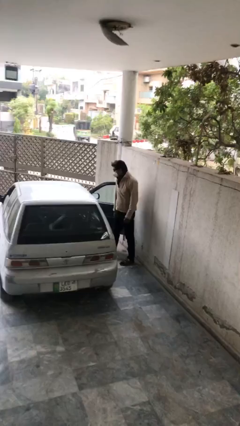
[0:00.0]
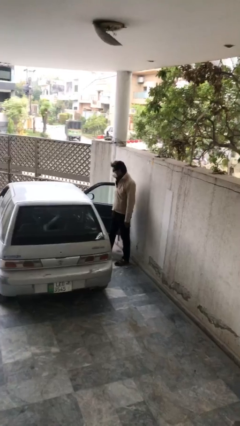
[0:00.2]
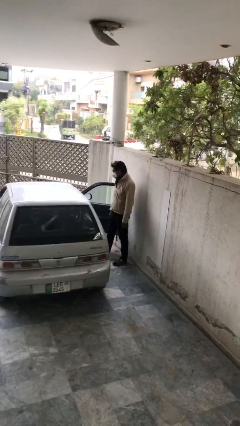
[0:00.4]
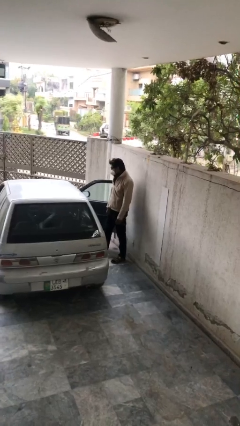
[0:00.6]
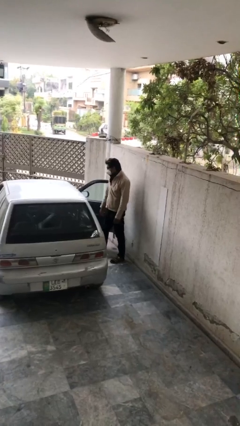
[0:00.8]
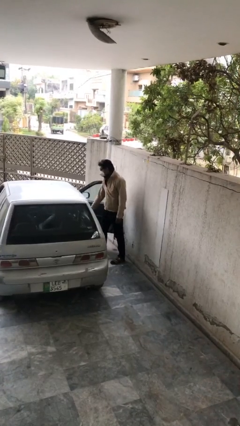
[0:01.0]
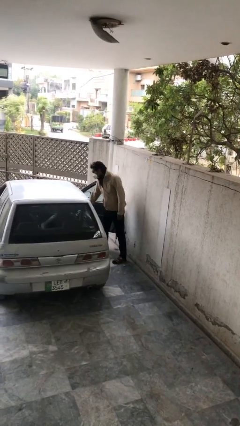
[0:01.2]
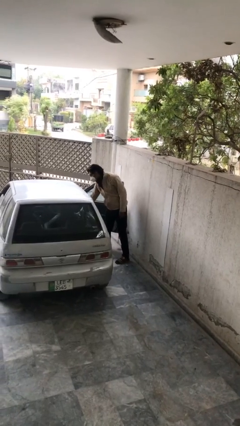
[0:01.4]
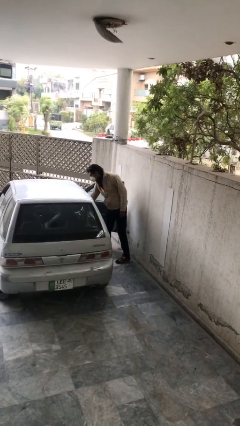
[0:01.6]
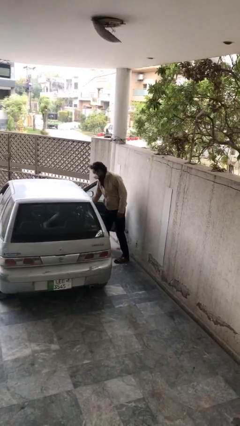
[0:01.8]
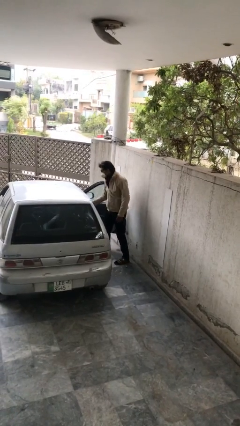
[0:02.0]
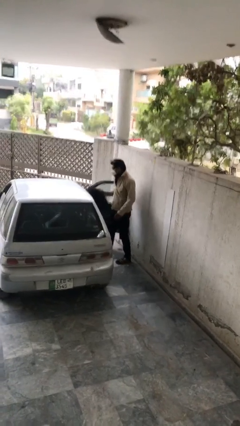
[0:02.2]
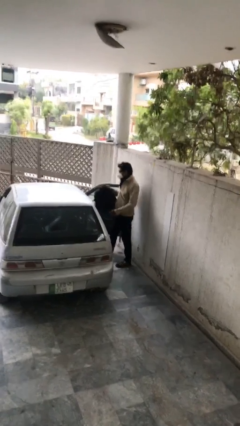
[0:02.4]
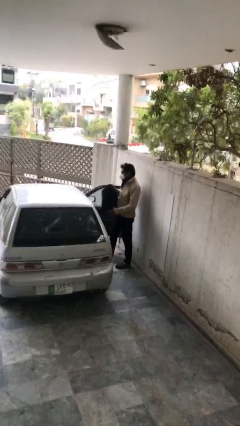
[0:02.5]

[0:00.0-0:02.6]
person unloads car

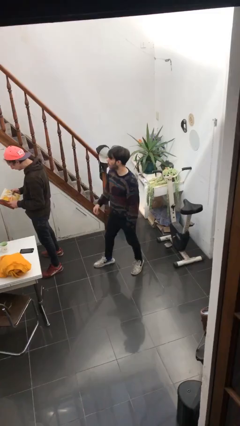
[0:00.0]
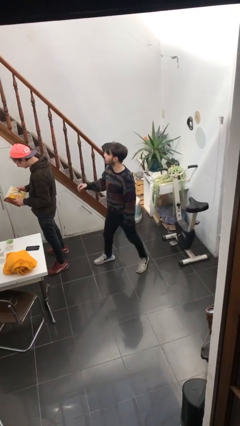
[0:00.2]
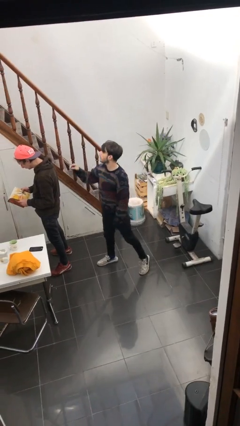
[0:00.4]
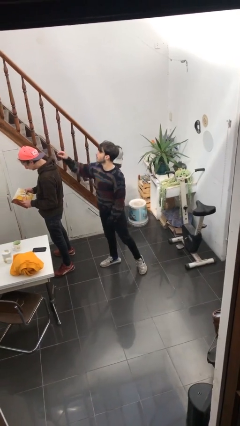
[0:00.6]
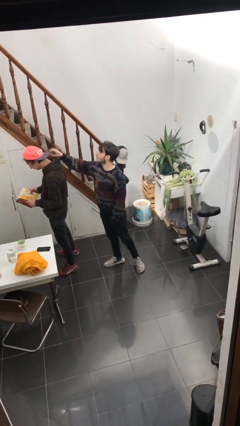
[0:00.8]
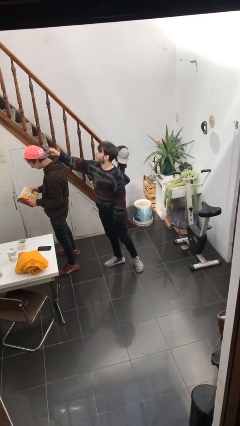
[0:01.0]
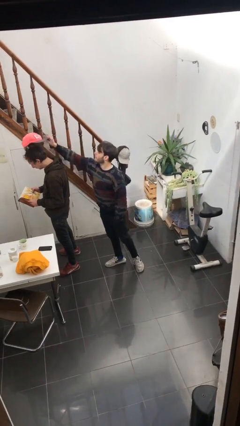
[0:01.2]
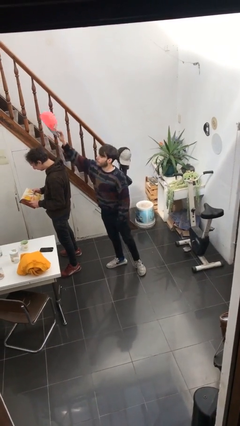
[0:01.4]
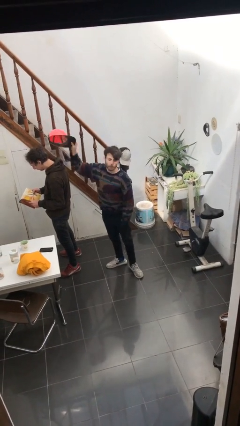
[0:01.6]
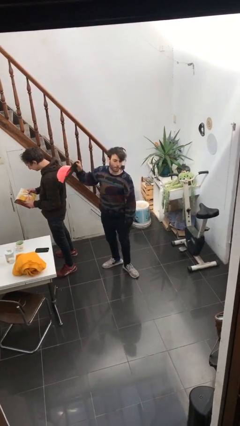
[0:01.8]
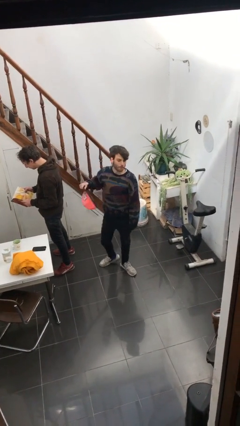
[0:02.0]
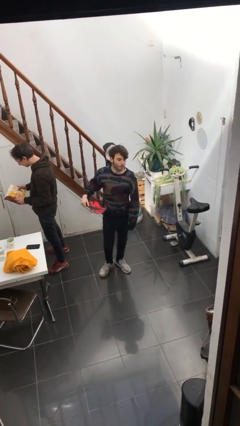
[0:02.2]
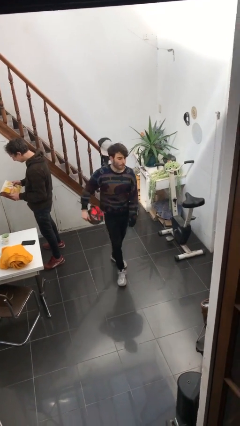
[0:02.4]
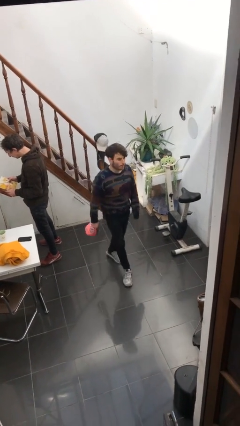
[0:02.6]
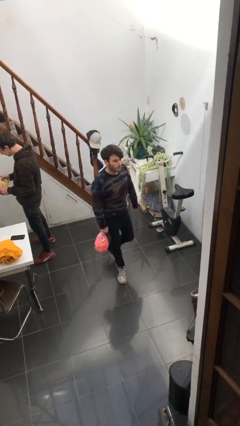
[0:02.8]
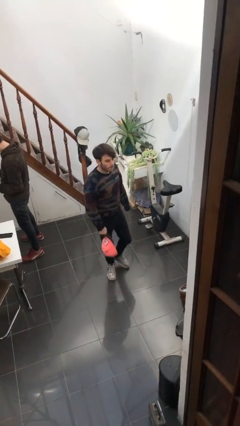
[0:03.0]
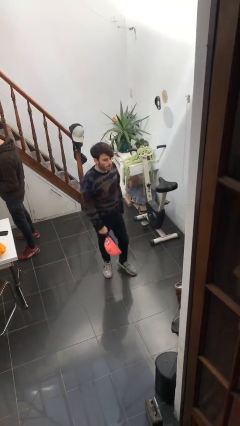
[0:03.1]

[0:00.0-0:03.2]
person steals object from person

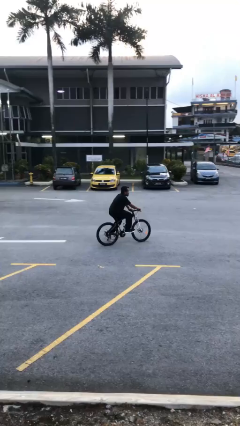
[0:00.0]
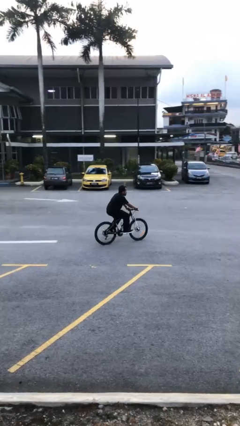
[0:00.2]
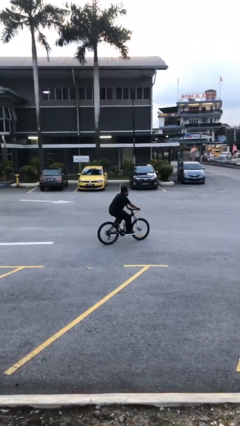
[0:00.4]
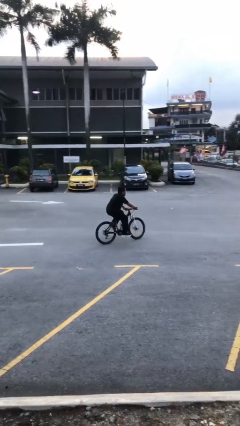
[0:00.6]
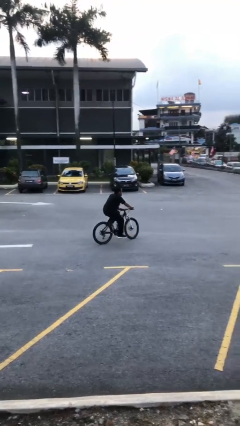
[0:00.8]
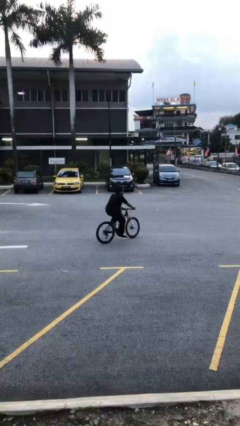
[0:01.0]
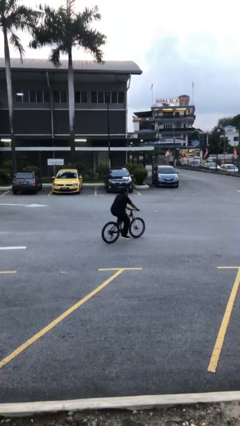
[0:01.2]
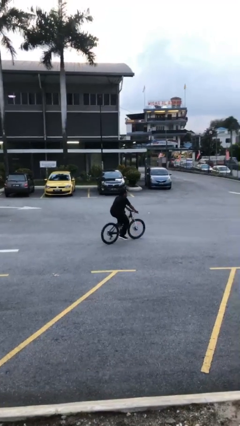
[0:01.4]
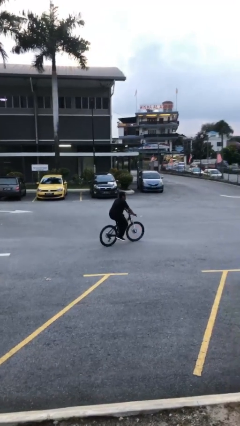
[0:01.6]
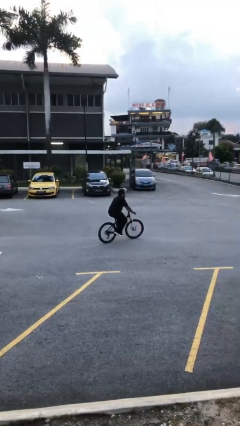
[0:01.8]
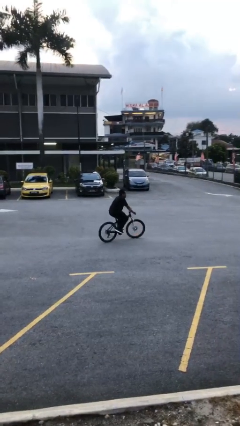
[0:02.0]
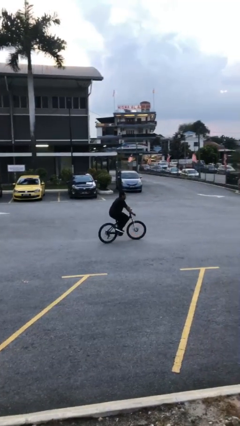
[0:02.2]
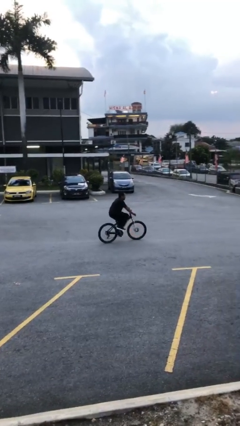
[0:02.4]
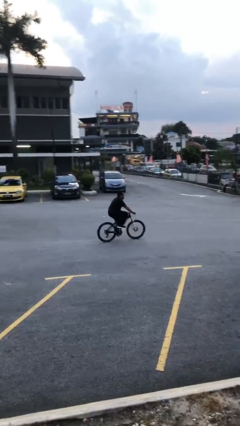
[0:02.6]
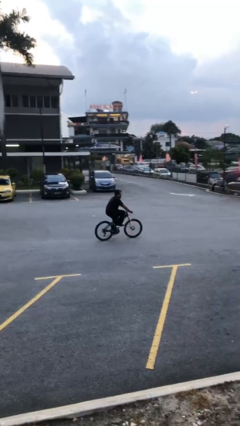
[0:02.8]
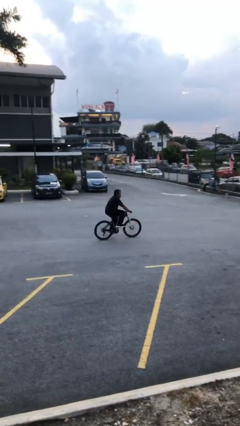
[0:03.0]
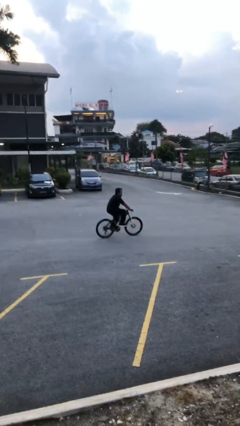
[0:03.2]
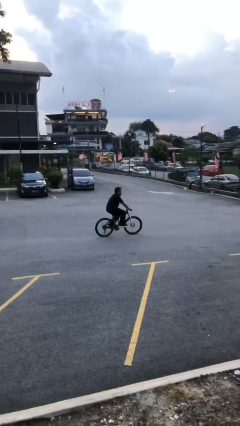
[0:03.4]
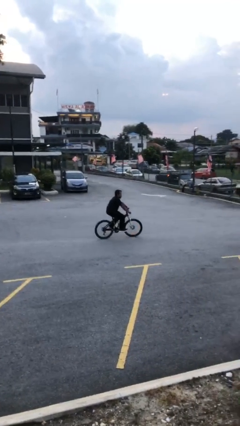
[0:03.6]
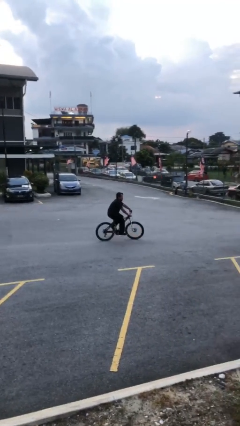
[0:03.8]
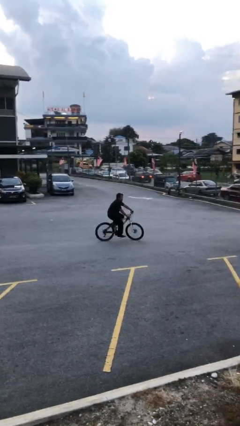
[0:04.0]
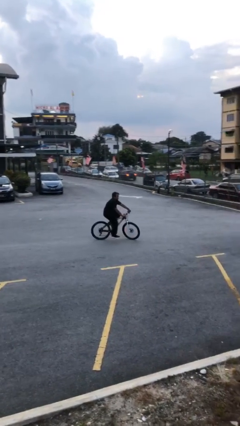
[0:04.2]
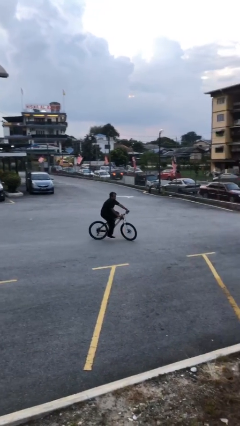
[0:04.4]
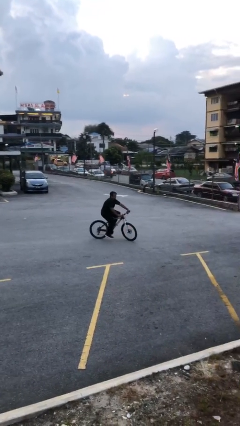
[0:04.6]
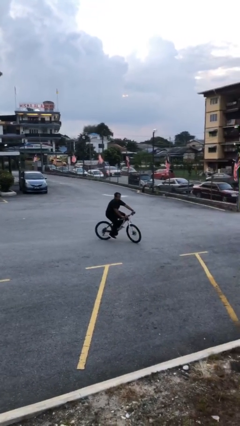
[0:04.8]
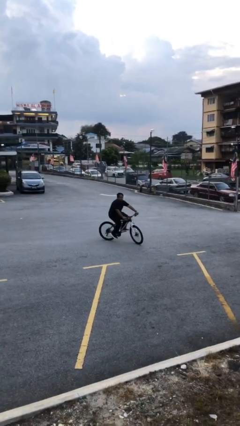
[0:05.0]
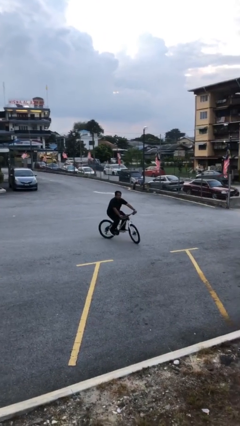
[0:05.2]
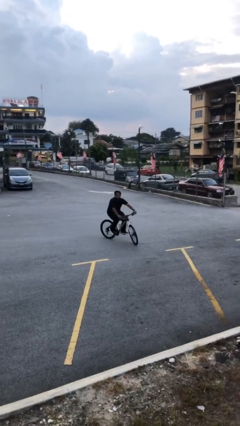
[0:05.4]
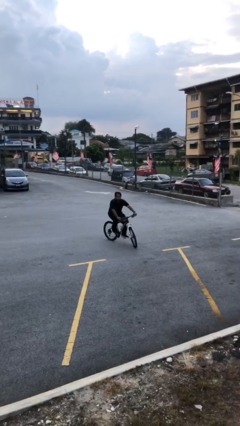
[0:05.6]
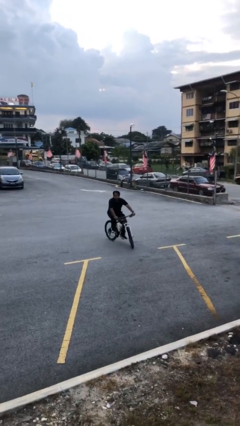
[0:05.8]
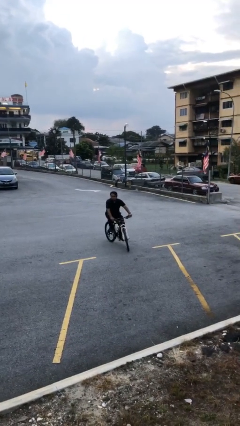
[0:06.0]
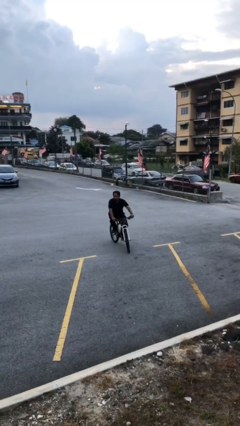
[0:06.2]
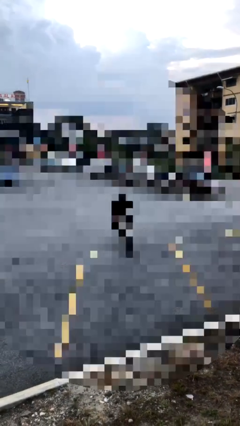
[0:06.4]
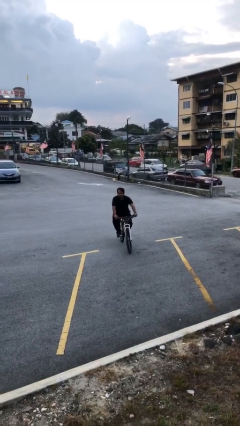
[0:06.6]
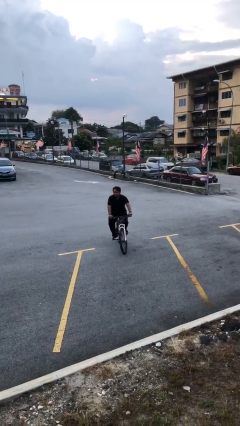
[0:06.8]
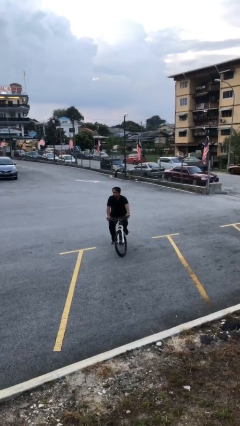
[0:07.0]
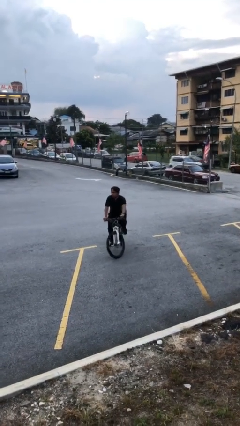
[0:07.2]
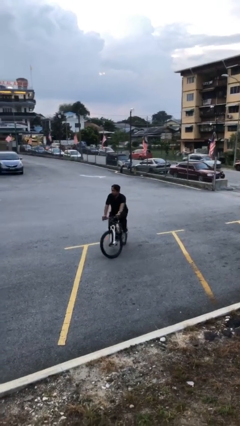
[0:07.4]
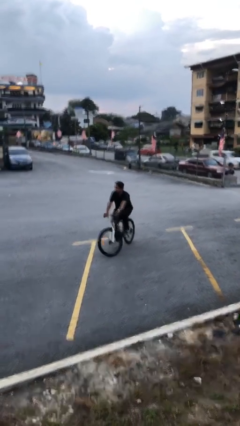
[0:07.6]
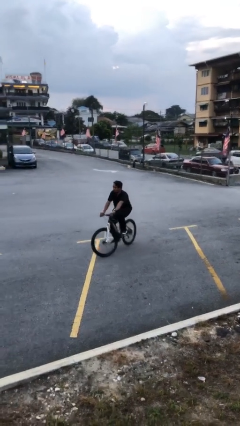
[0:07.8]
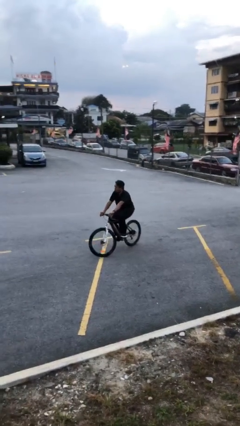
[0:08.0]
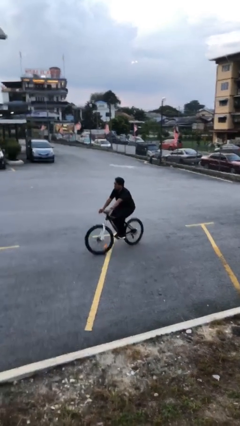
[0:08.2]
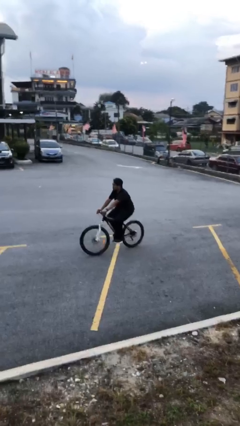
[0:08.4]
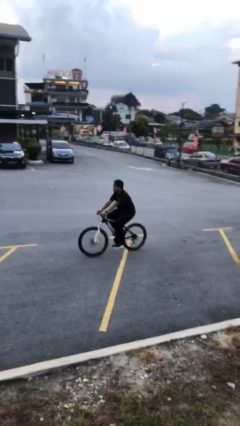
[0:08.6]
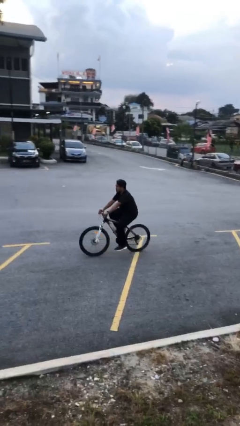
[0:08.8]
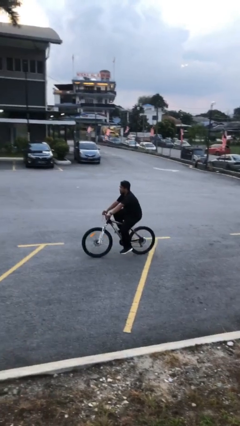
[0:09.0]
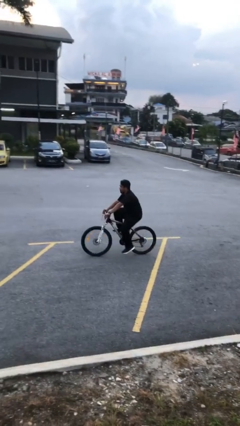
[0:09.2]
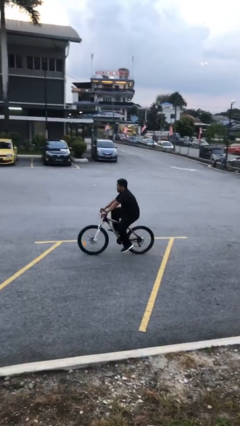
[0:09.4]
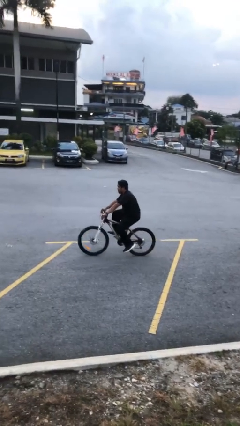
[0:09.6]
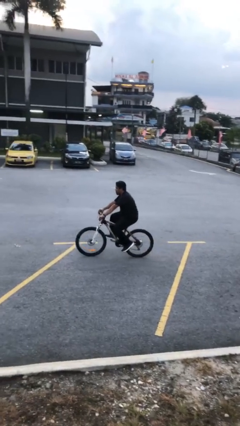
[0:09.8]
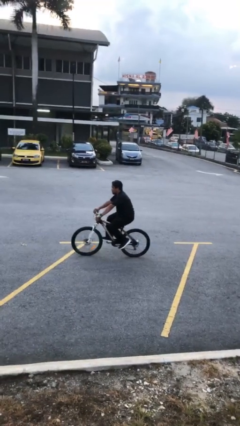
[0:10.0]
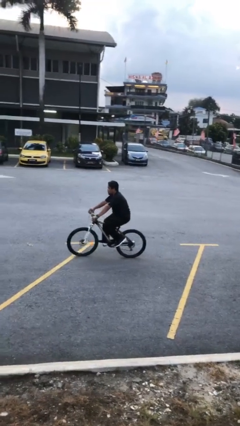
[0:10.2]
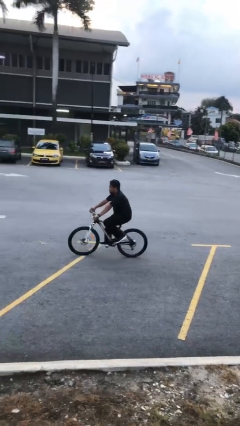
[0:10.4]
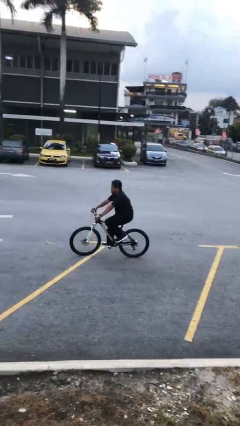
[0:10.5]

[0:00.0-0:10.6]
person rides bicycle

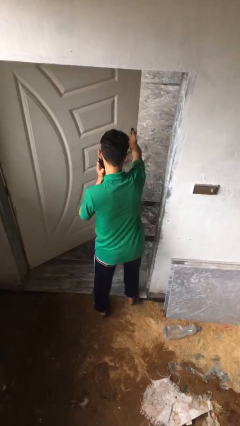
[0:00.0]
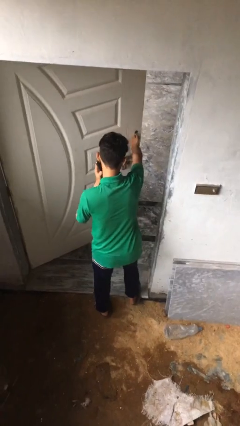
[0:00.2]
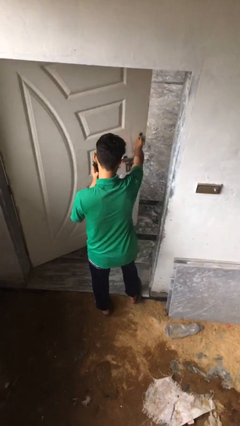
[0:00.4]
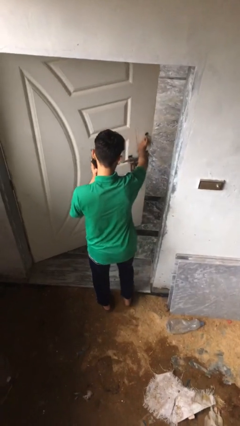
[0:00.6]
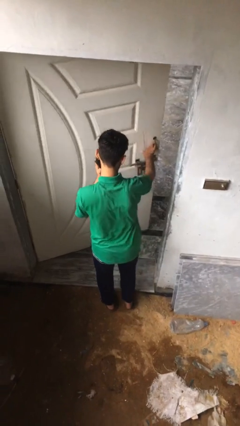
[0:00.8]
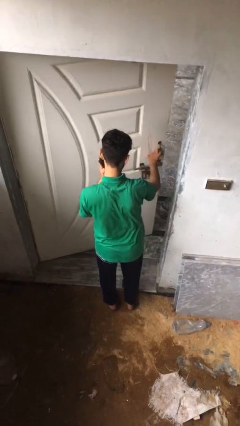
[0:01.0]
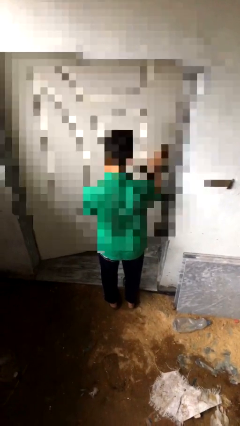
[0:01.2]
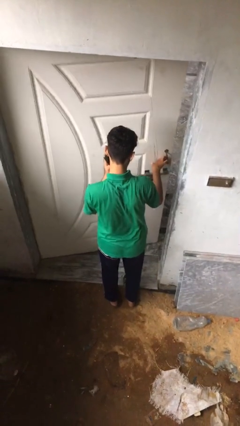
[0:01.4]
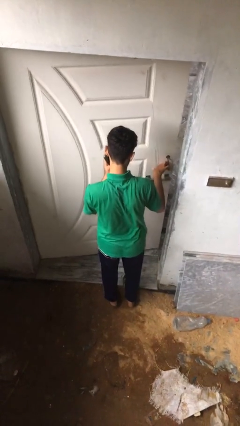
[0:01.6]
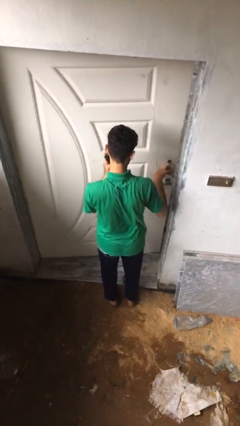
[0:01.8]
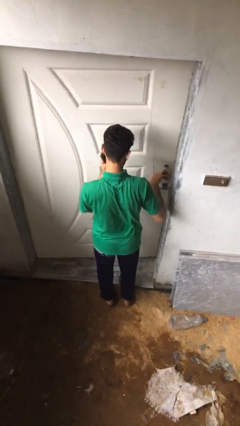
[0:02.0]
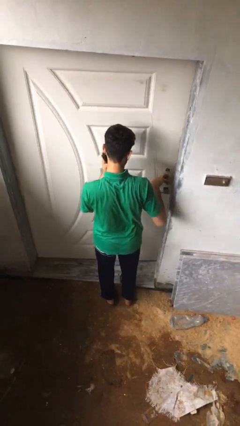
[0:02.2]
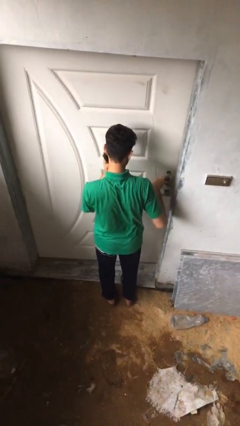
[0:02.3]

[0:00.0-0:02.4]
person closes facility door
